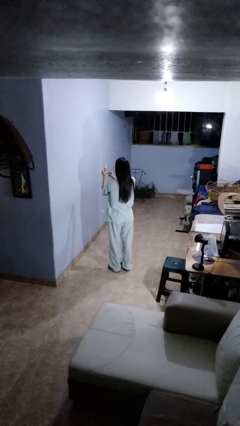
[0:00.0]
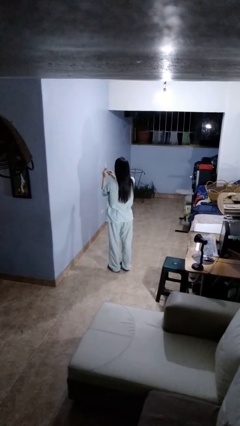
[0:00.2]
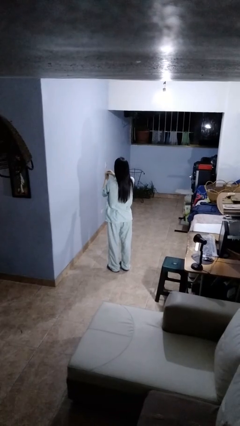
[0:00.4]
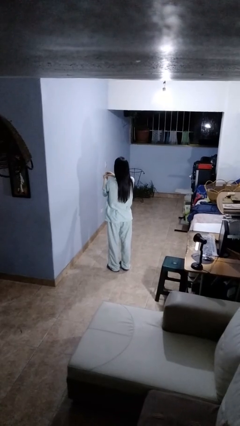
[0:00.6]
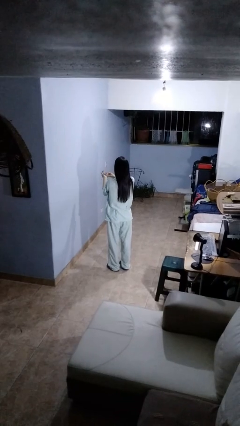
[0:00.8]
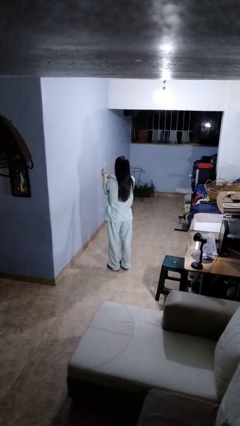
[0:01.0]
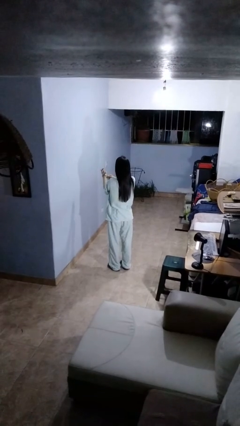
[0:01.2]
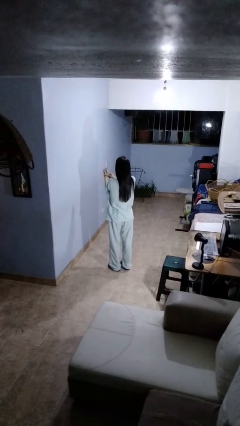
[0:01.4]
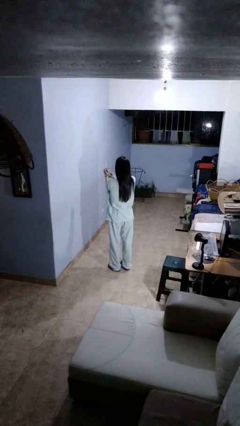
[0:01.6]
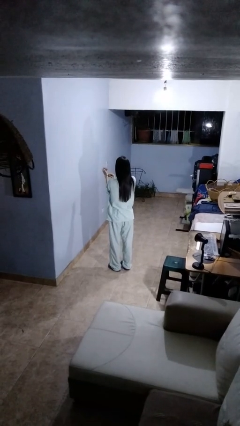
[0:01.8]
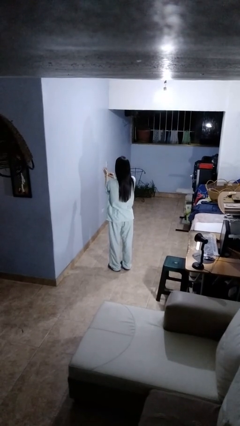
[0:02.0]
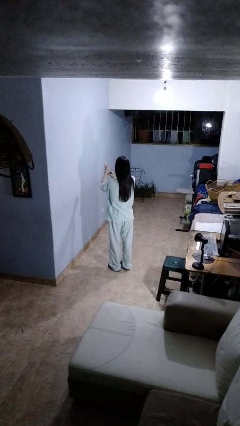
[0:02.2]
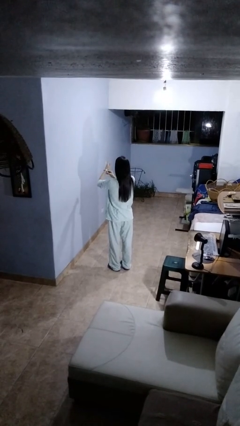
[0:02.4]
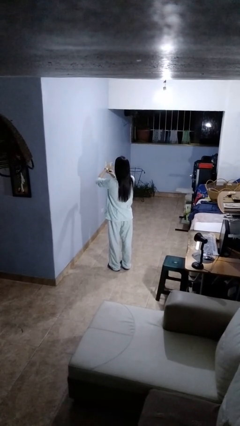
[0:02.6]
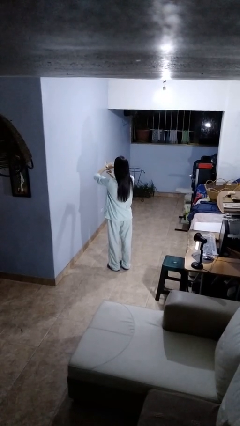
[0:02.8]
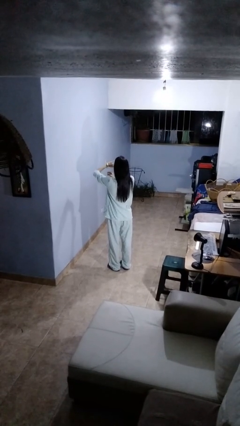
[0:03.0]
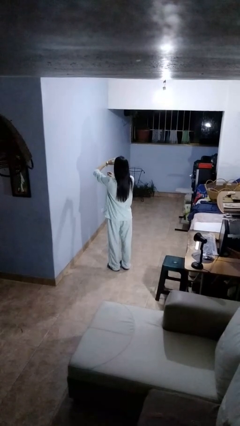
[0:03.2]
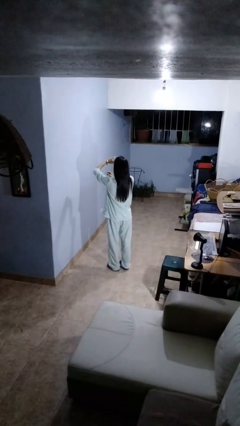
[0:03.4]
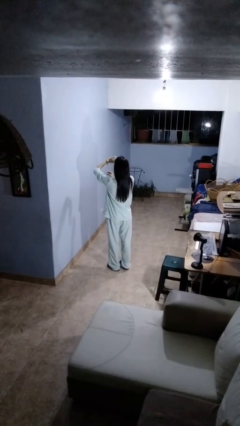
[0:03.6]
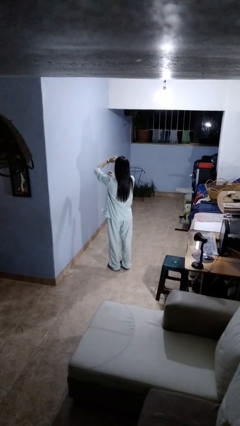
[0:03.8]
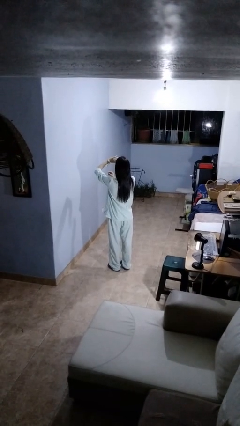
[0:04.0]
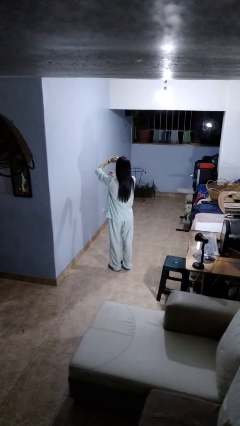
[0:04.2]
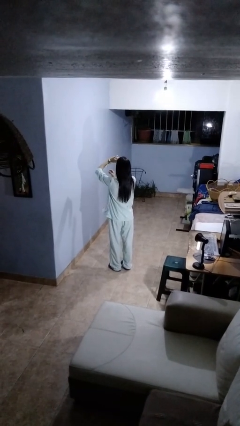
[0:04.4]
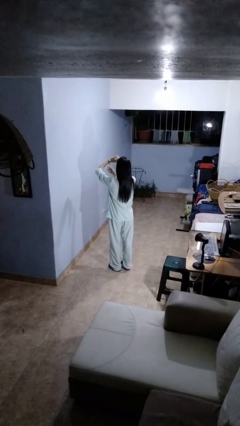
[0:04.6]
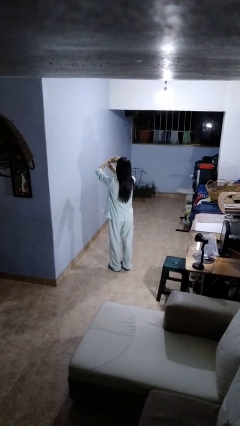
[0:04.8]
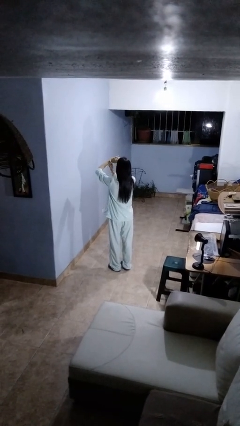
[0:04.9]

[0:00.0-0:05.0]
person puts on wristwatch

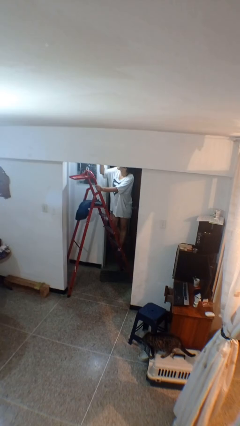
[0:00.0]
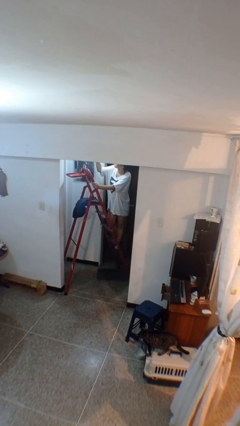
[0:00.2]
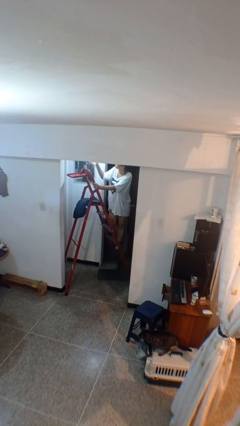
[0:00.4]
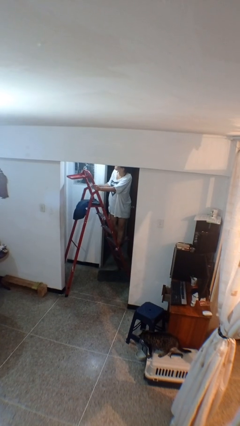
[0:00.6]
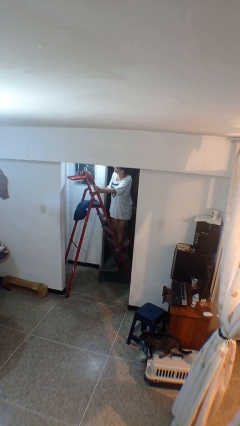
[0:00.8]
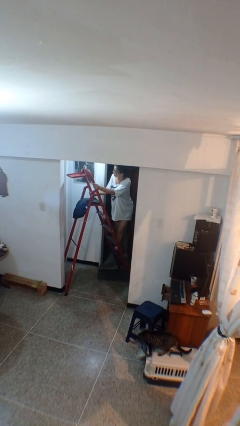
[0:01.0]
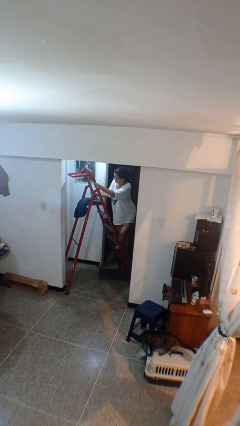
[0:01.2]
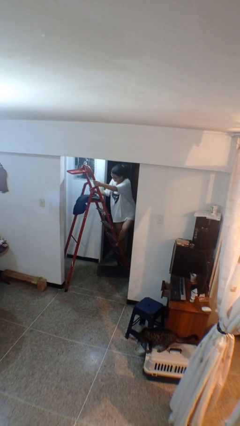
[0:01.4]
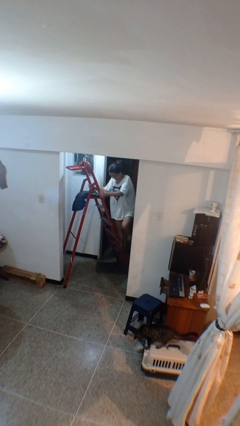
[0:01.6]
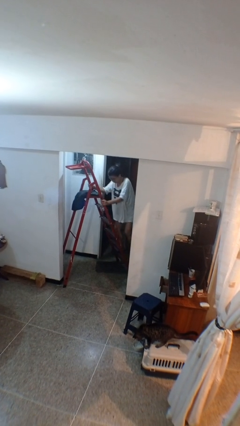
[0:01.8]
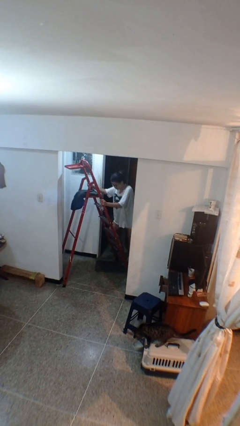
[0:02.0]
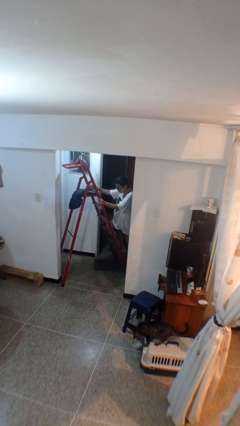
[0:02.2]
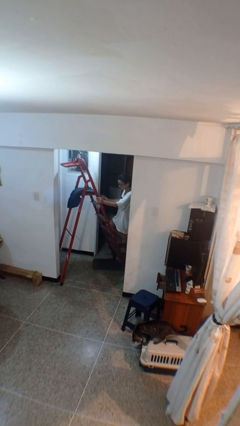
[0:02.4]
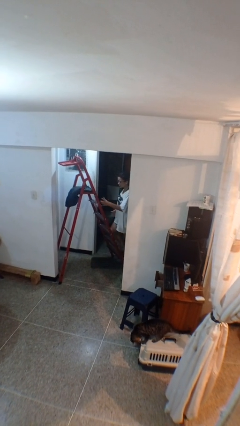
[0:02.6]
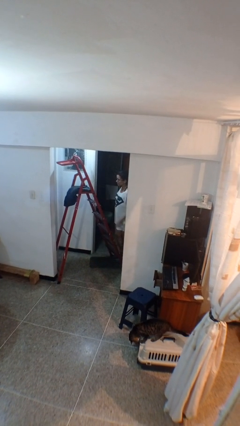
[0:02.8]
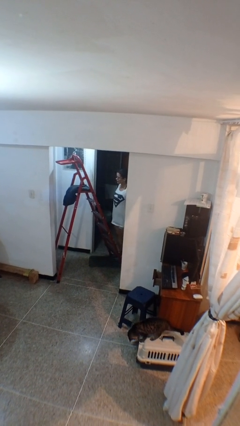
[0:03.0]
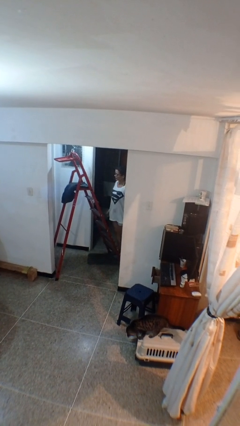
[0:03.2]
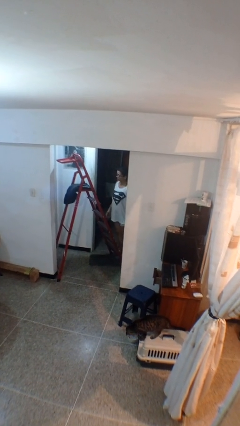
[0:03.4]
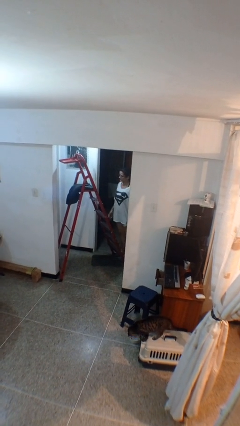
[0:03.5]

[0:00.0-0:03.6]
person climbs down ladder

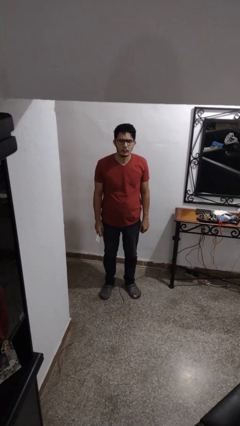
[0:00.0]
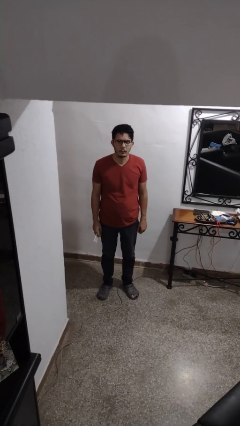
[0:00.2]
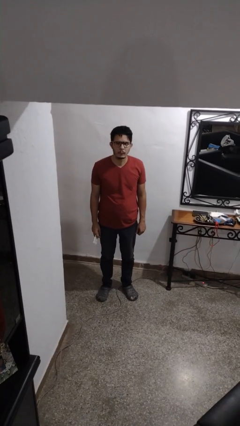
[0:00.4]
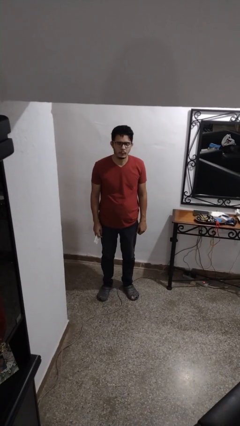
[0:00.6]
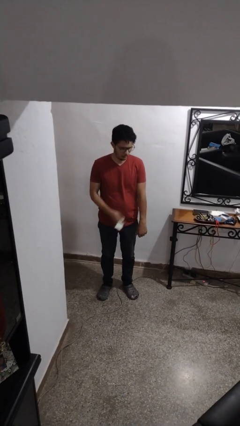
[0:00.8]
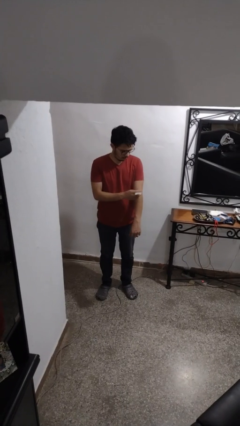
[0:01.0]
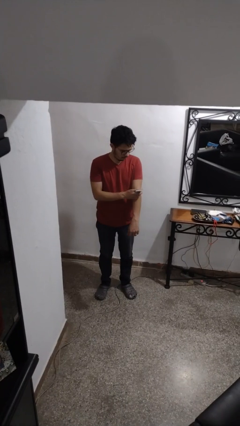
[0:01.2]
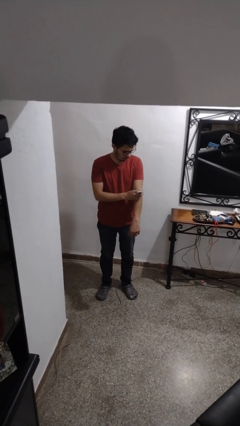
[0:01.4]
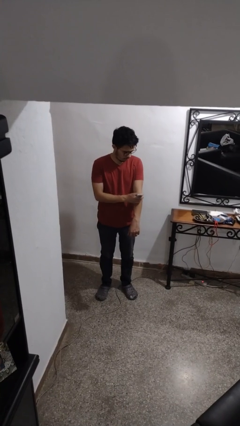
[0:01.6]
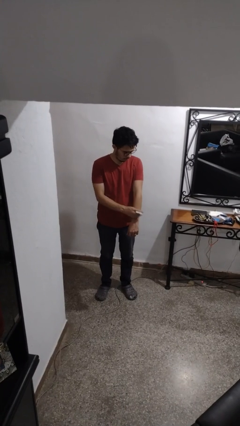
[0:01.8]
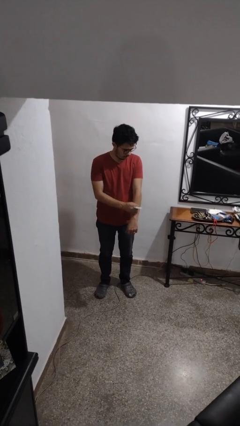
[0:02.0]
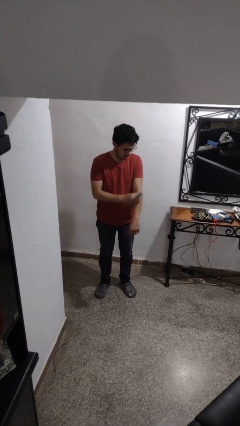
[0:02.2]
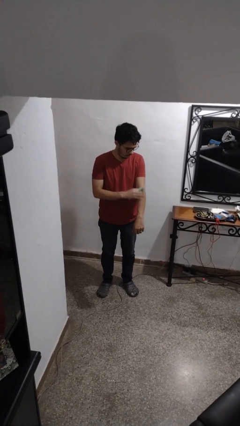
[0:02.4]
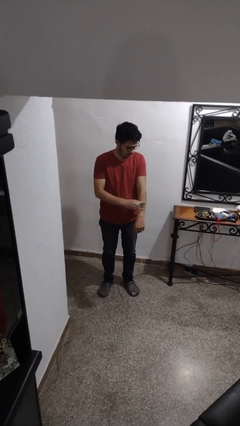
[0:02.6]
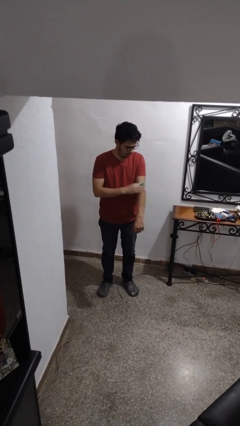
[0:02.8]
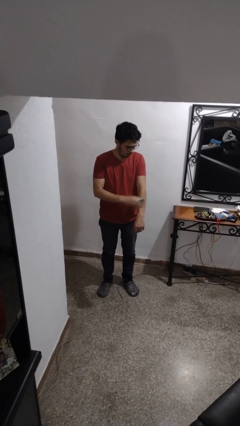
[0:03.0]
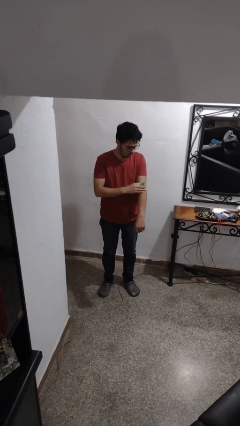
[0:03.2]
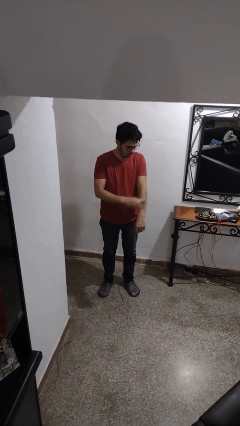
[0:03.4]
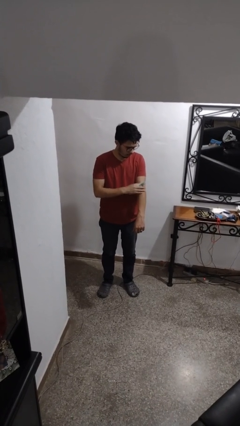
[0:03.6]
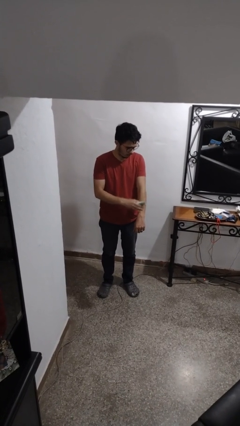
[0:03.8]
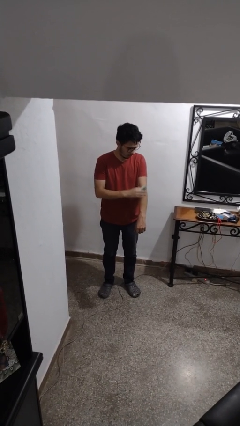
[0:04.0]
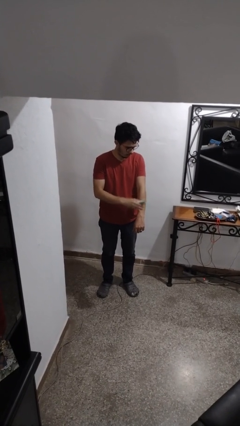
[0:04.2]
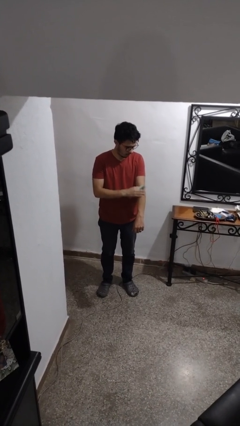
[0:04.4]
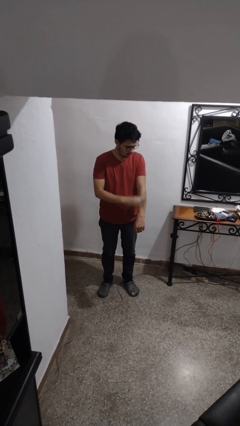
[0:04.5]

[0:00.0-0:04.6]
person applies sunscreen

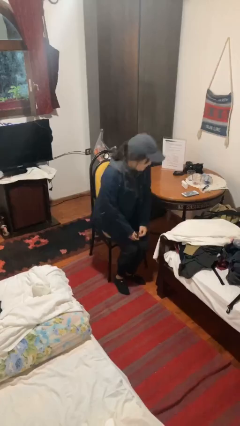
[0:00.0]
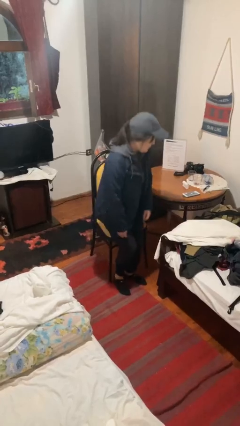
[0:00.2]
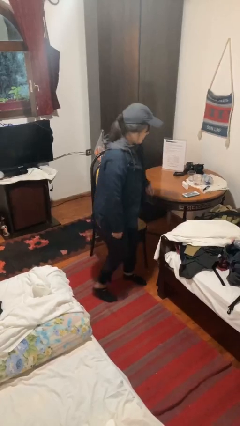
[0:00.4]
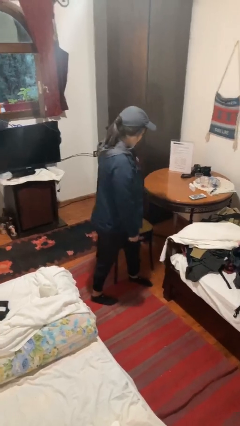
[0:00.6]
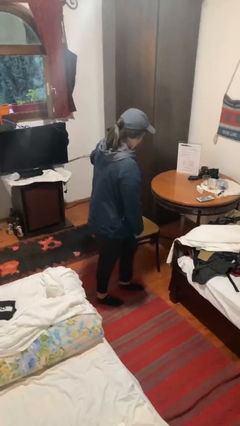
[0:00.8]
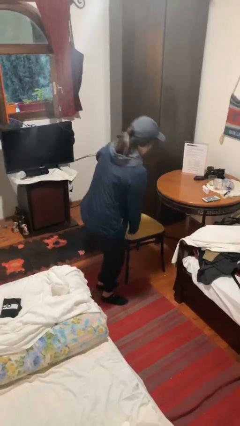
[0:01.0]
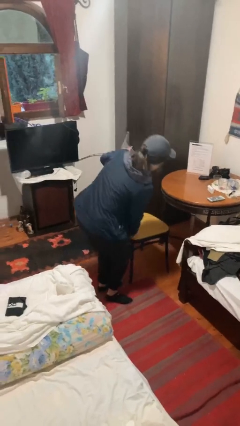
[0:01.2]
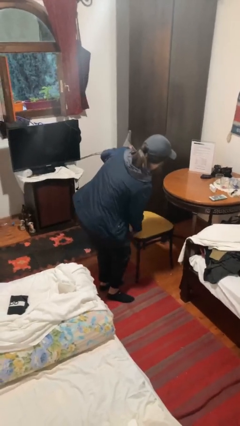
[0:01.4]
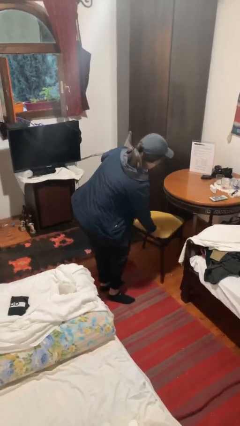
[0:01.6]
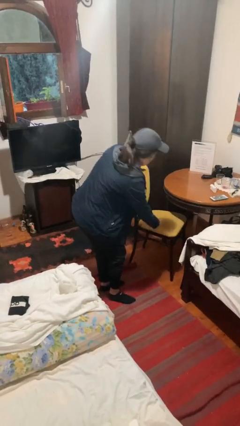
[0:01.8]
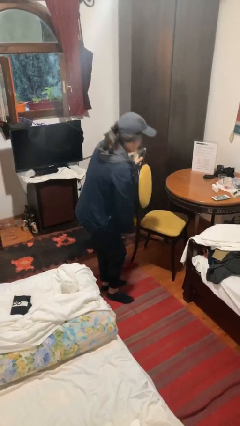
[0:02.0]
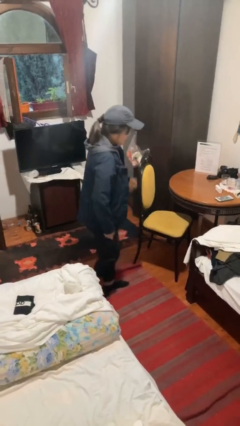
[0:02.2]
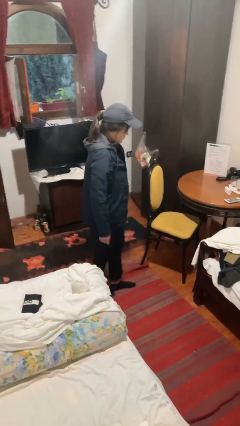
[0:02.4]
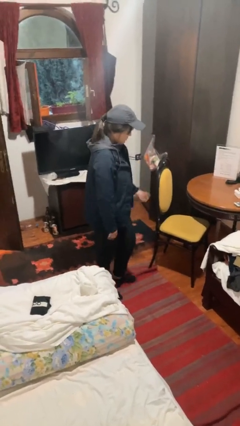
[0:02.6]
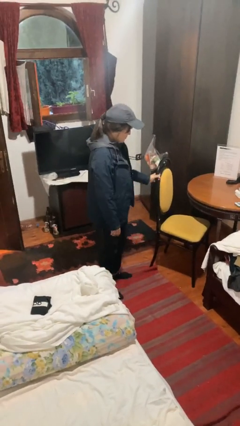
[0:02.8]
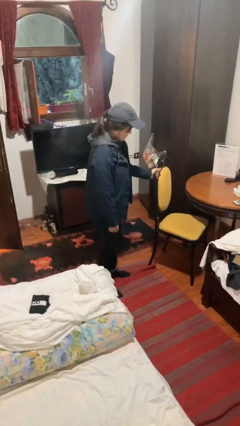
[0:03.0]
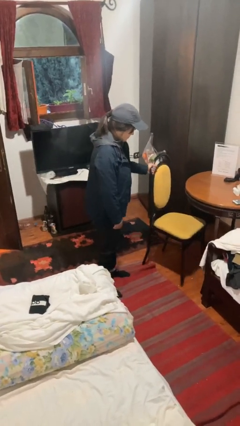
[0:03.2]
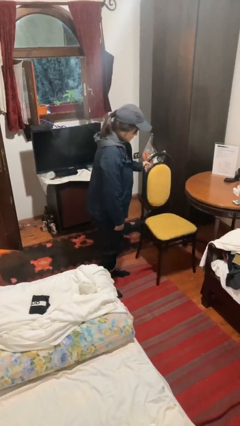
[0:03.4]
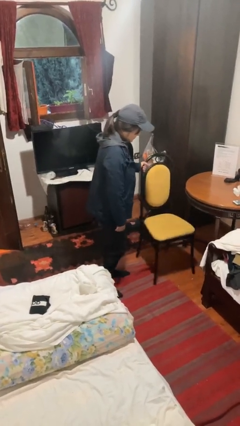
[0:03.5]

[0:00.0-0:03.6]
person stands up

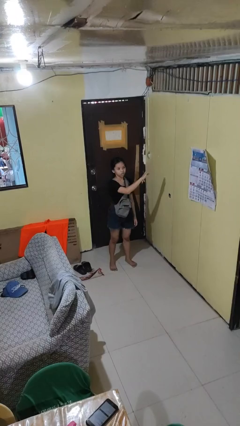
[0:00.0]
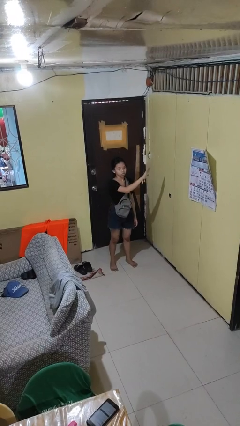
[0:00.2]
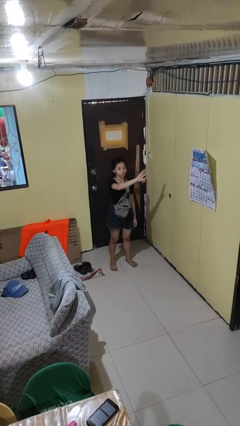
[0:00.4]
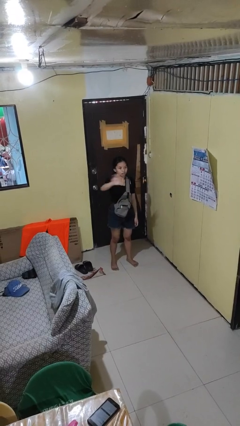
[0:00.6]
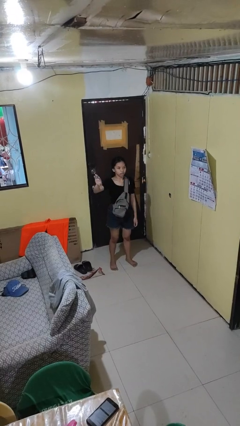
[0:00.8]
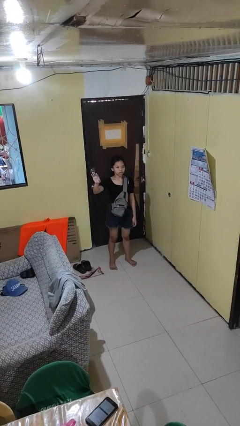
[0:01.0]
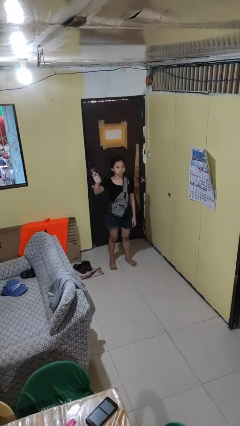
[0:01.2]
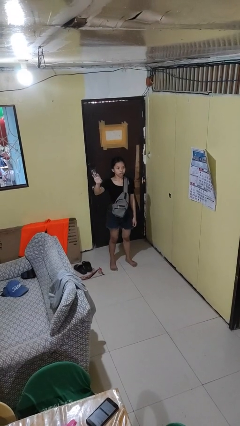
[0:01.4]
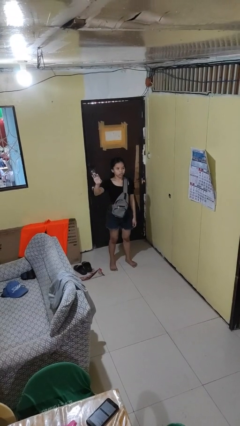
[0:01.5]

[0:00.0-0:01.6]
person gestures swipe right
